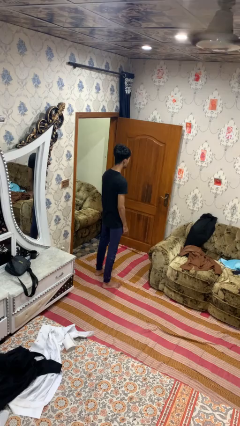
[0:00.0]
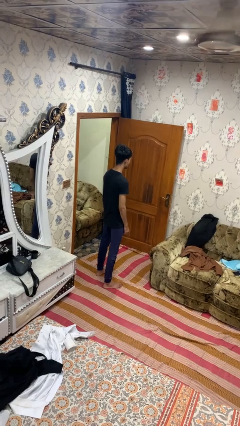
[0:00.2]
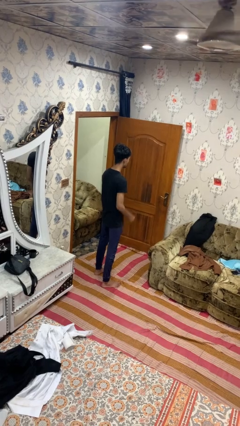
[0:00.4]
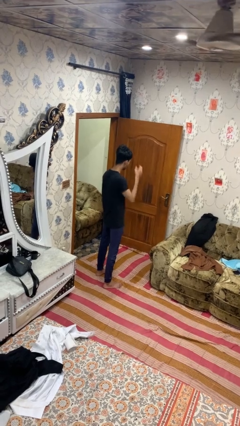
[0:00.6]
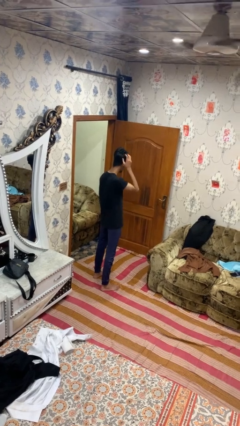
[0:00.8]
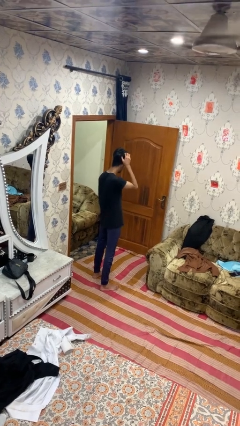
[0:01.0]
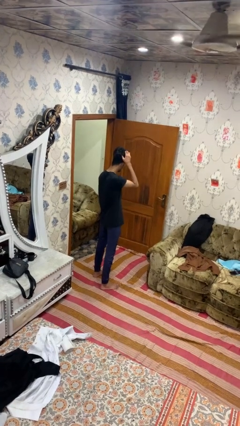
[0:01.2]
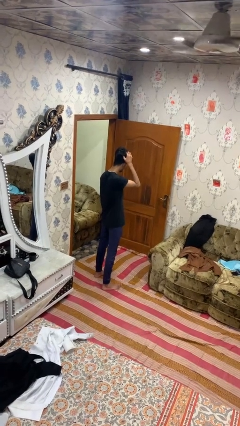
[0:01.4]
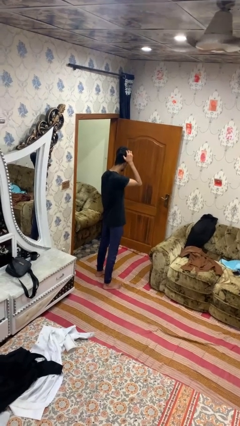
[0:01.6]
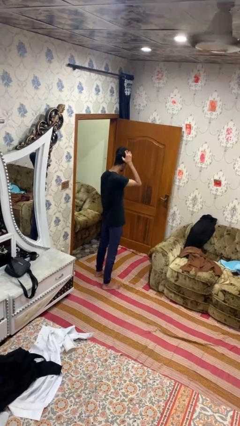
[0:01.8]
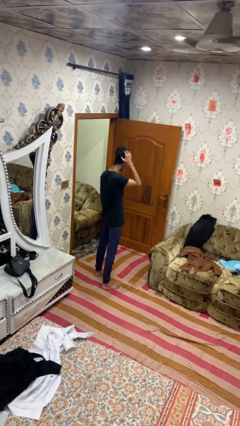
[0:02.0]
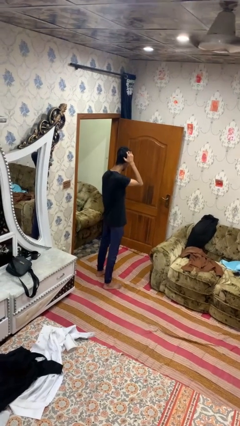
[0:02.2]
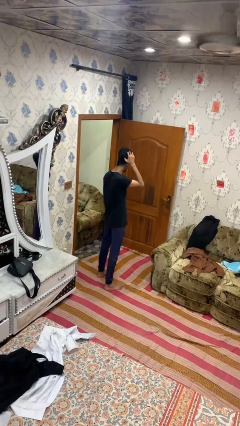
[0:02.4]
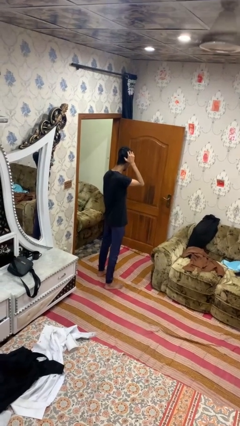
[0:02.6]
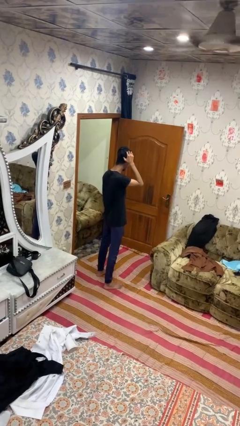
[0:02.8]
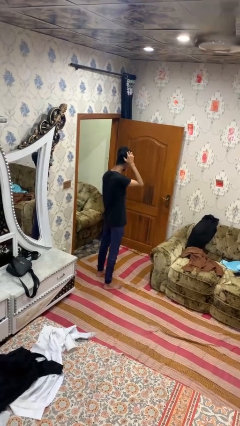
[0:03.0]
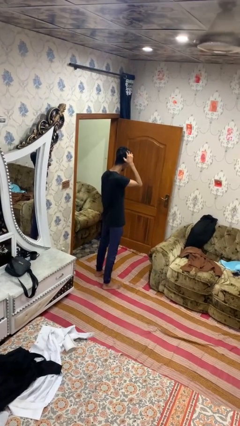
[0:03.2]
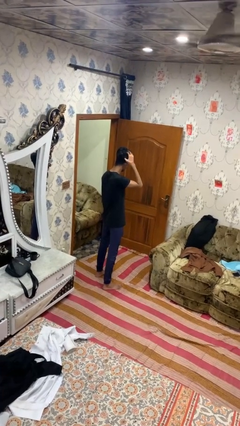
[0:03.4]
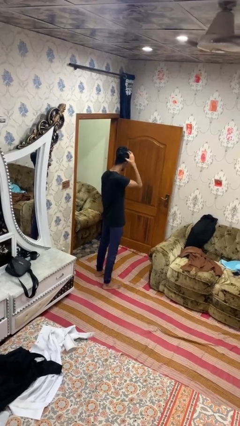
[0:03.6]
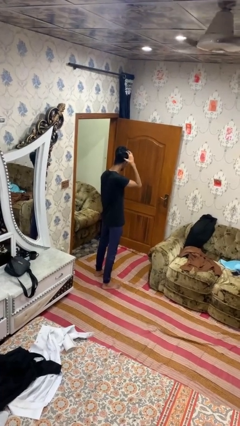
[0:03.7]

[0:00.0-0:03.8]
person strokes hair

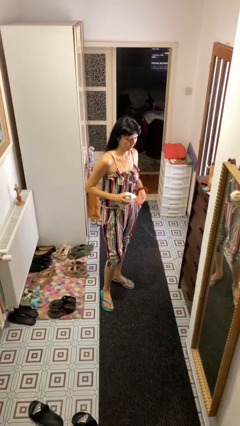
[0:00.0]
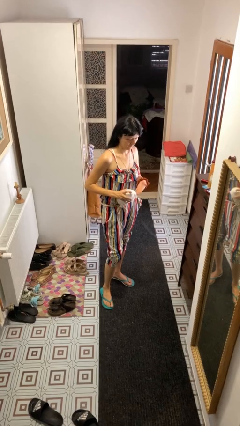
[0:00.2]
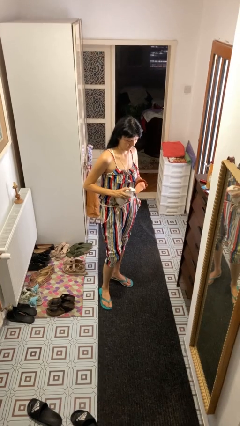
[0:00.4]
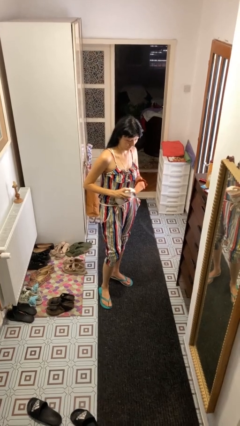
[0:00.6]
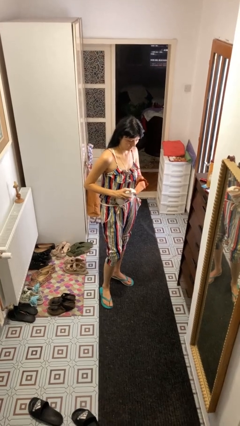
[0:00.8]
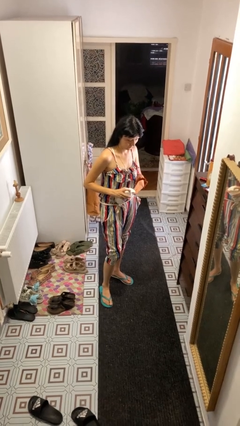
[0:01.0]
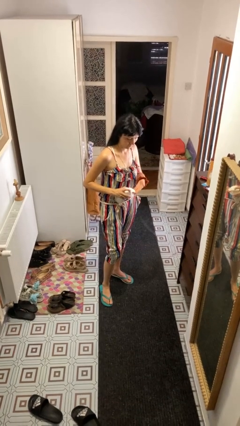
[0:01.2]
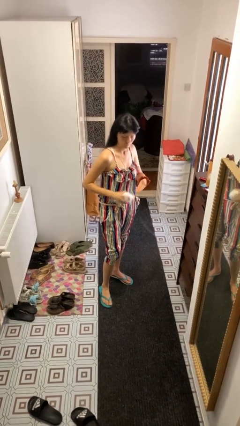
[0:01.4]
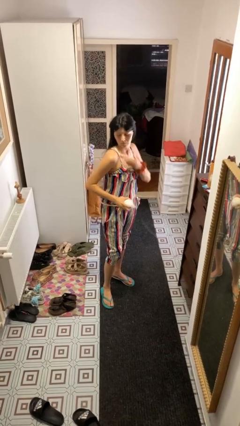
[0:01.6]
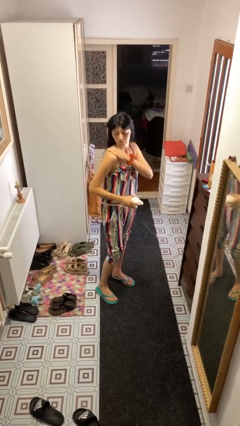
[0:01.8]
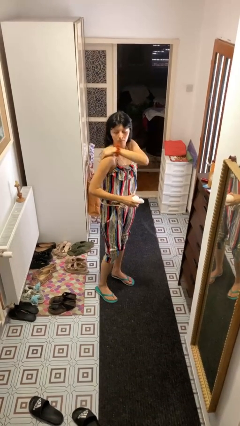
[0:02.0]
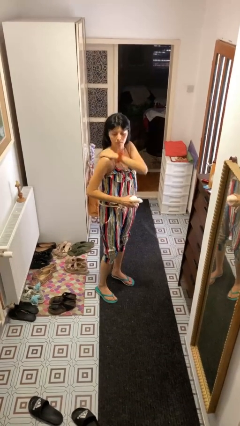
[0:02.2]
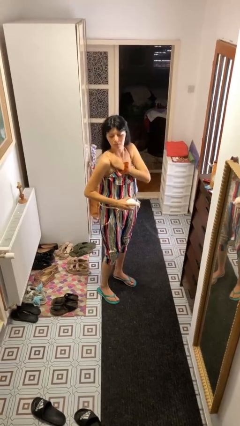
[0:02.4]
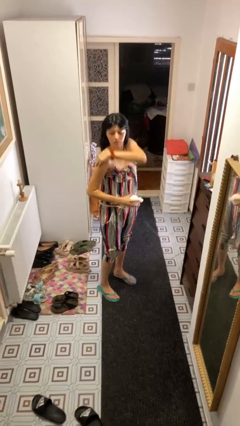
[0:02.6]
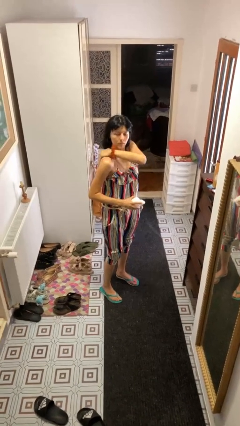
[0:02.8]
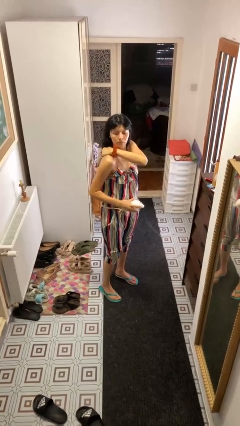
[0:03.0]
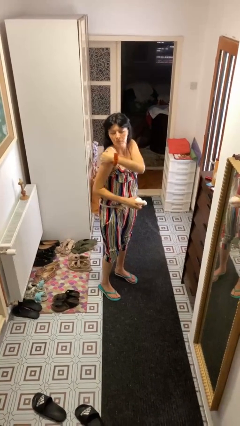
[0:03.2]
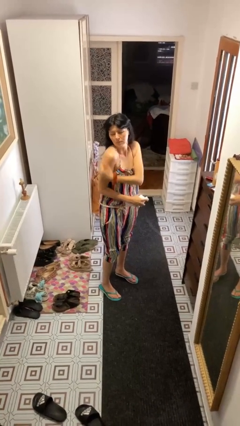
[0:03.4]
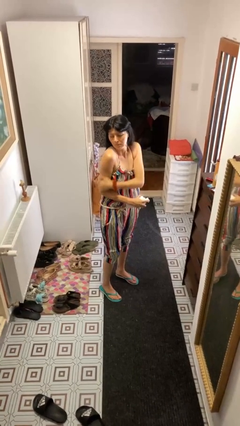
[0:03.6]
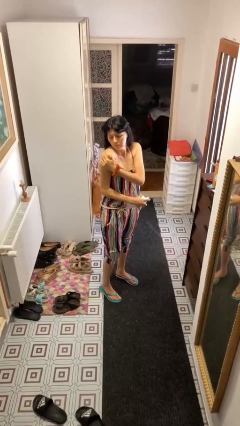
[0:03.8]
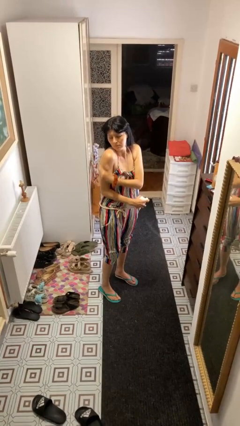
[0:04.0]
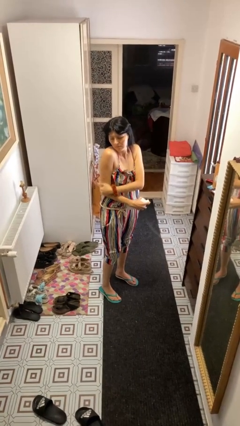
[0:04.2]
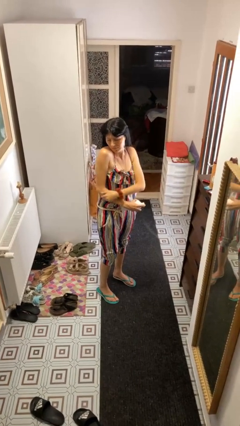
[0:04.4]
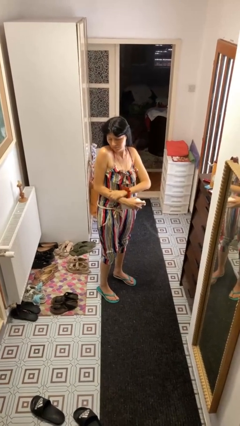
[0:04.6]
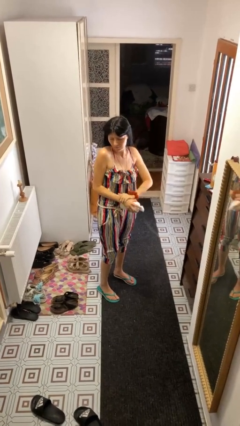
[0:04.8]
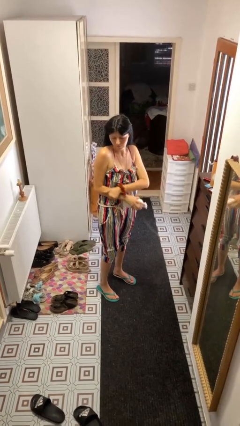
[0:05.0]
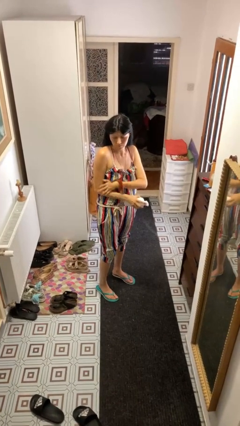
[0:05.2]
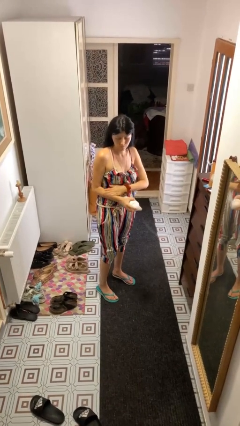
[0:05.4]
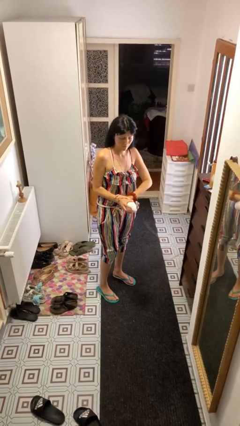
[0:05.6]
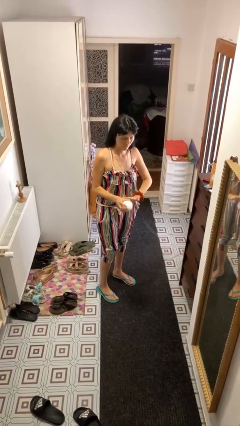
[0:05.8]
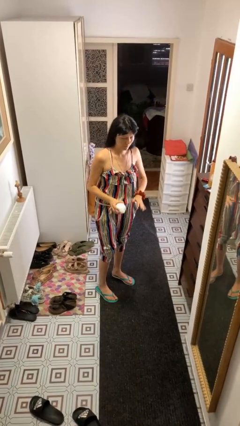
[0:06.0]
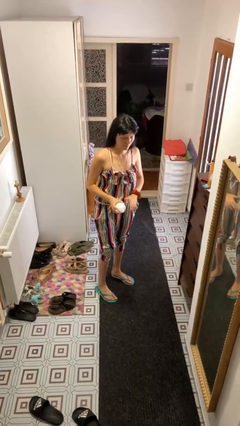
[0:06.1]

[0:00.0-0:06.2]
person applies sunscreen

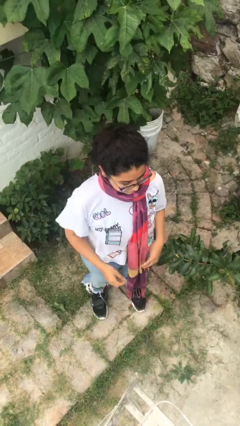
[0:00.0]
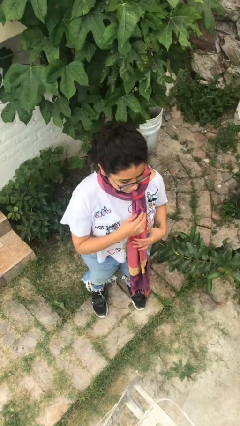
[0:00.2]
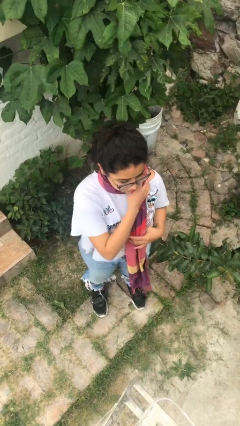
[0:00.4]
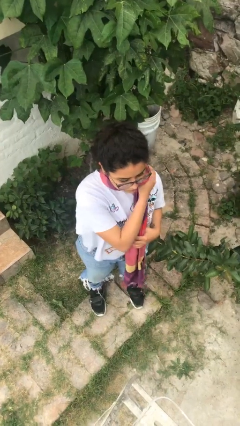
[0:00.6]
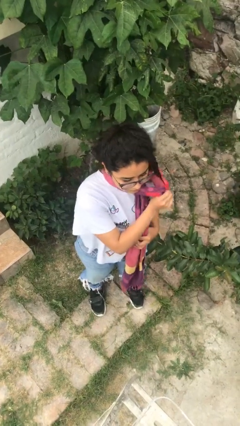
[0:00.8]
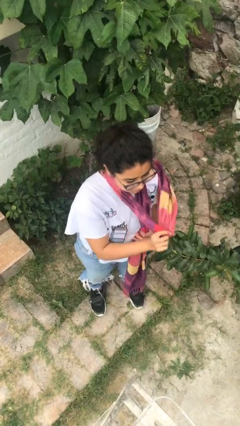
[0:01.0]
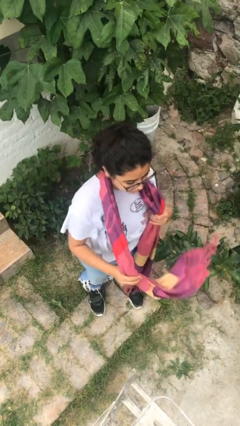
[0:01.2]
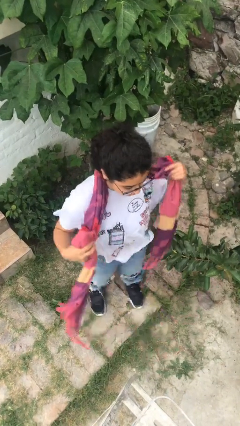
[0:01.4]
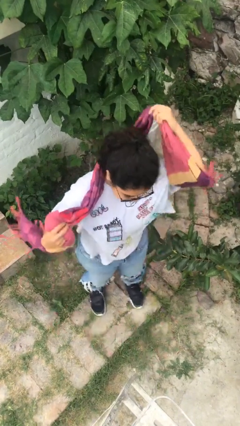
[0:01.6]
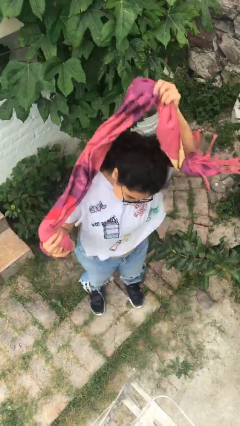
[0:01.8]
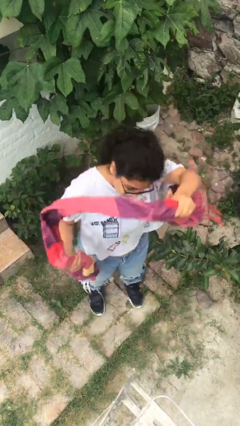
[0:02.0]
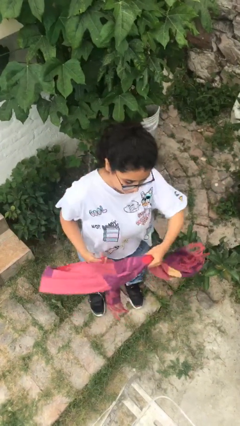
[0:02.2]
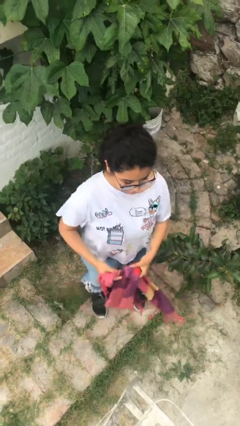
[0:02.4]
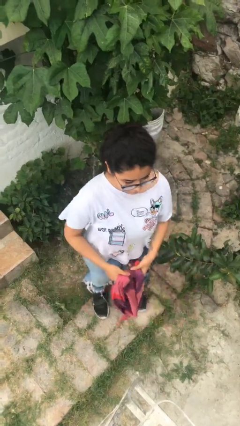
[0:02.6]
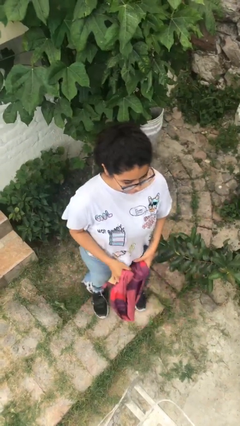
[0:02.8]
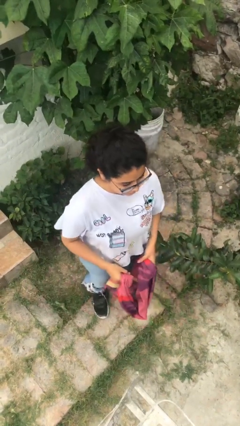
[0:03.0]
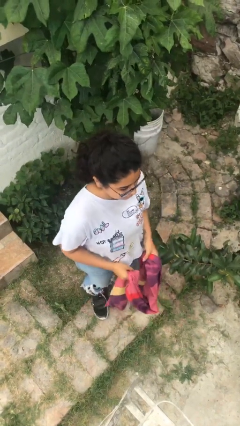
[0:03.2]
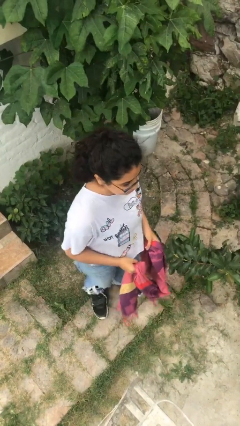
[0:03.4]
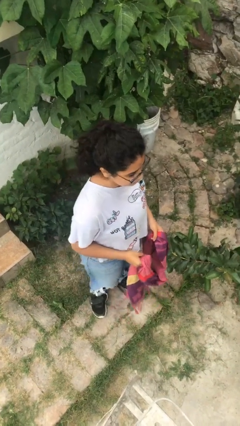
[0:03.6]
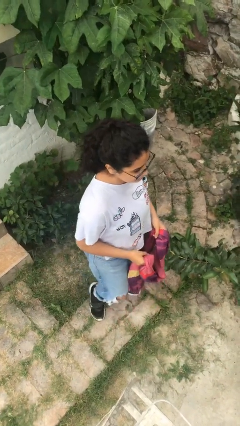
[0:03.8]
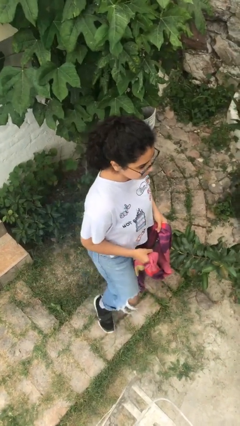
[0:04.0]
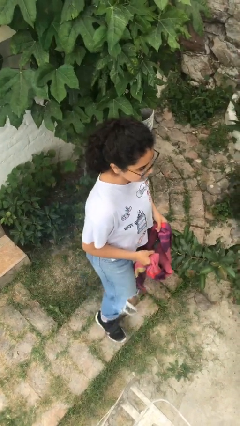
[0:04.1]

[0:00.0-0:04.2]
person takes off scarf

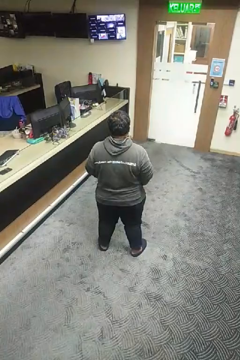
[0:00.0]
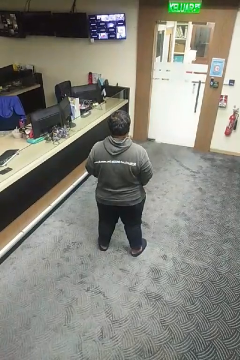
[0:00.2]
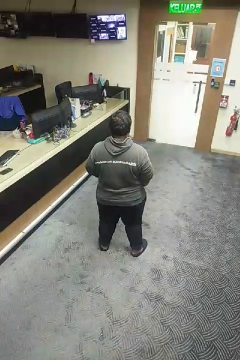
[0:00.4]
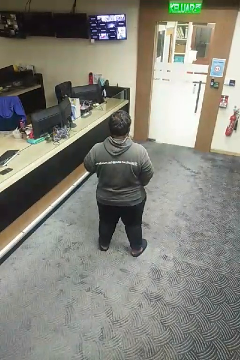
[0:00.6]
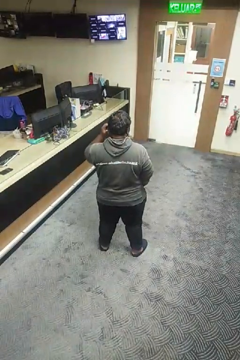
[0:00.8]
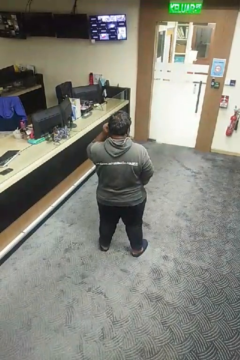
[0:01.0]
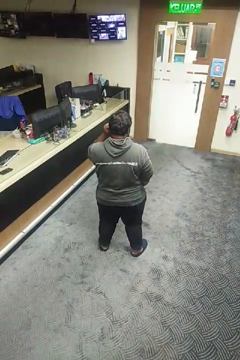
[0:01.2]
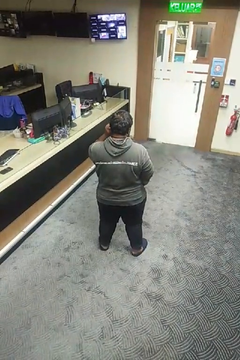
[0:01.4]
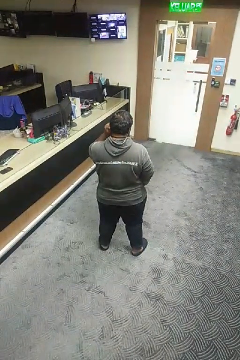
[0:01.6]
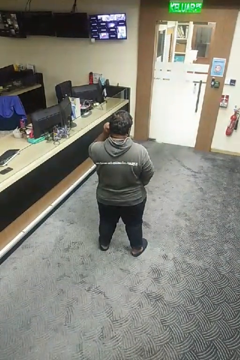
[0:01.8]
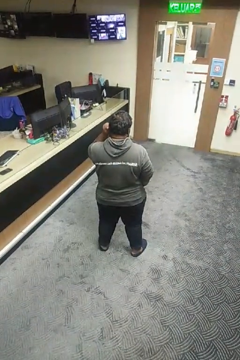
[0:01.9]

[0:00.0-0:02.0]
person touches earlobe

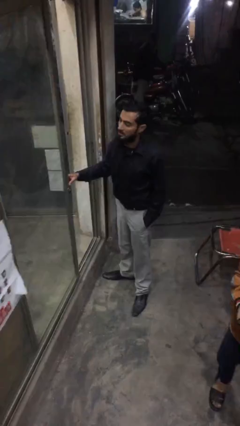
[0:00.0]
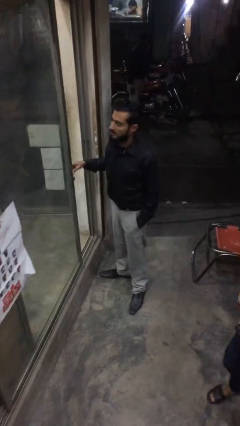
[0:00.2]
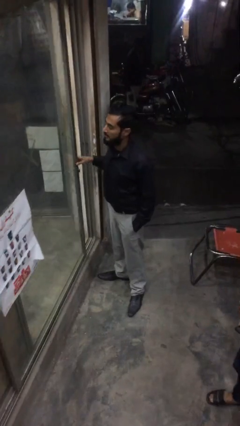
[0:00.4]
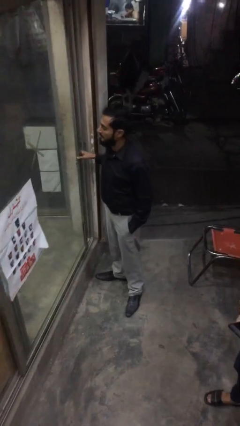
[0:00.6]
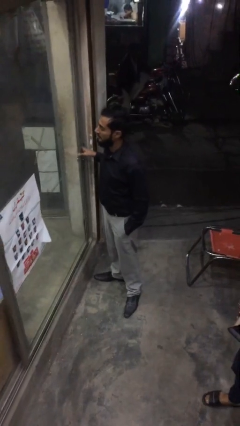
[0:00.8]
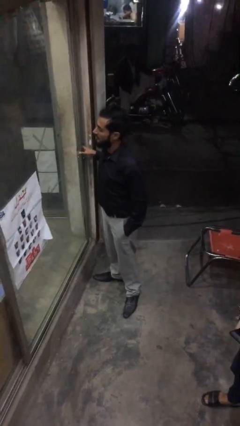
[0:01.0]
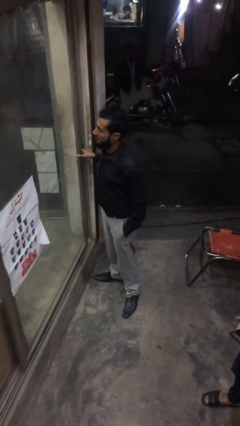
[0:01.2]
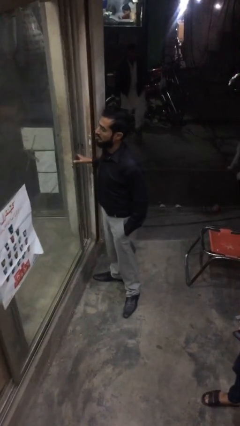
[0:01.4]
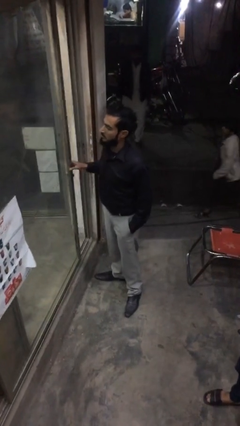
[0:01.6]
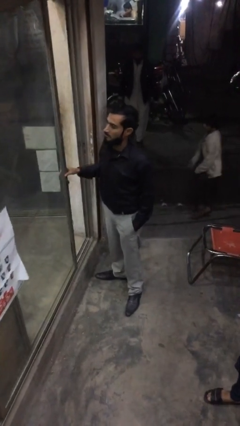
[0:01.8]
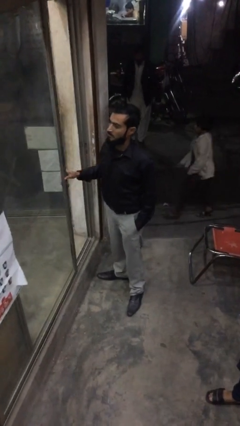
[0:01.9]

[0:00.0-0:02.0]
person opens facility door
